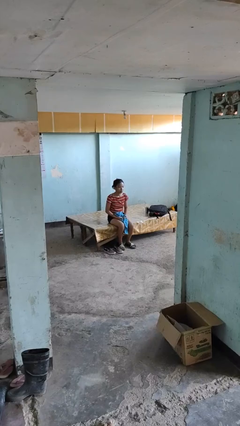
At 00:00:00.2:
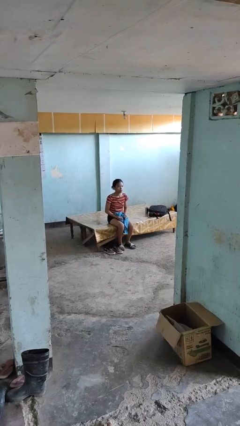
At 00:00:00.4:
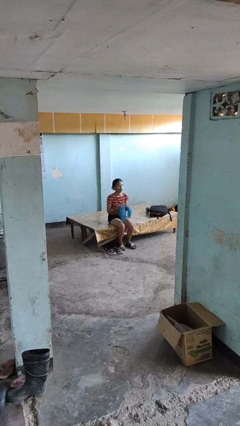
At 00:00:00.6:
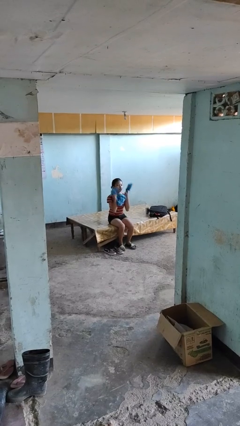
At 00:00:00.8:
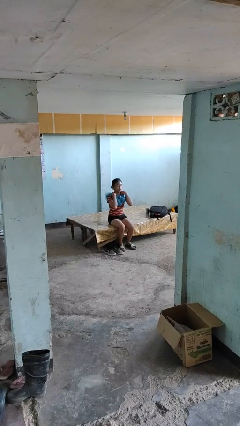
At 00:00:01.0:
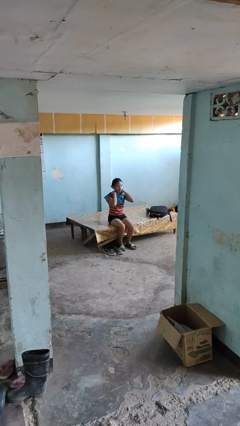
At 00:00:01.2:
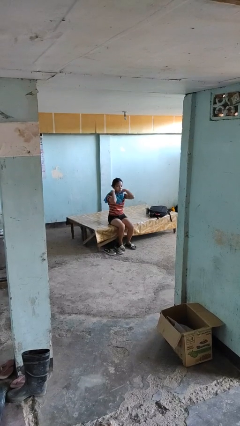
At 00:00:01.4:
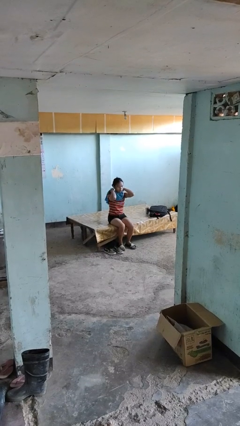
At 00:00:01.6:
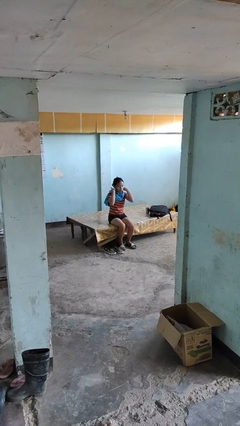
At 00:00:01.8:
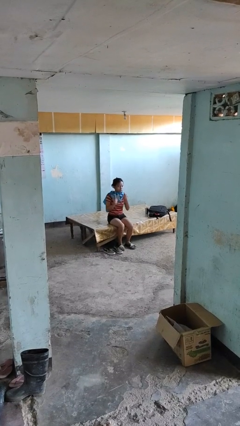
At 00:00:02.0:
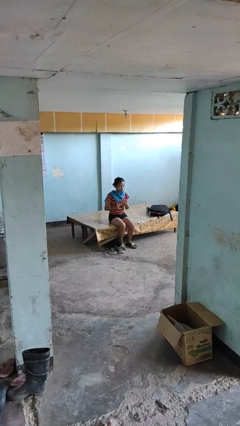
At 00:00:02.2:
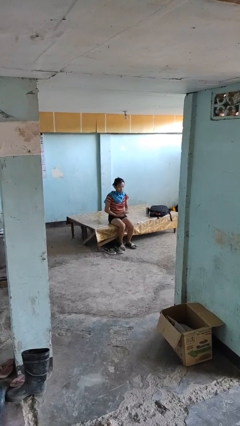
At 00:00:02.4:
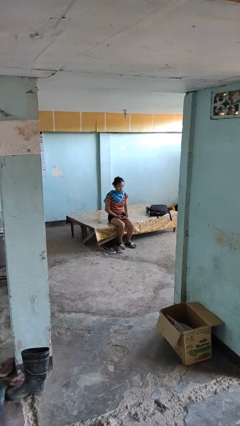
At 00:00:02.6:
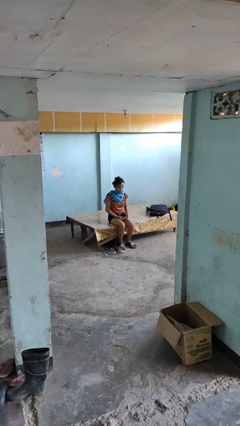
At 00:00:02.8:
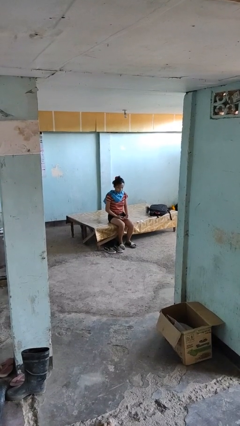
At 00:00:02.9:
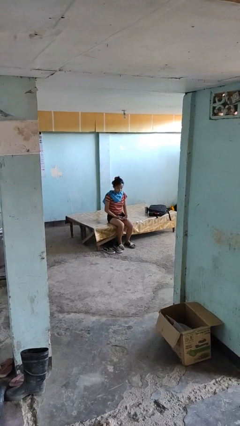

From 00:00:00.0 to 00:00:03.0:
person puts on scarf

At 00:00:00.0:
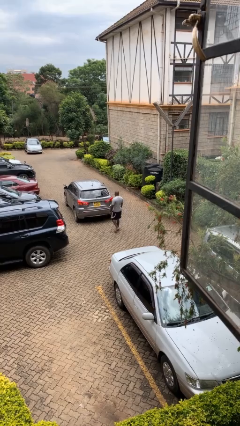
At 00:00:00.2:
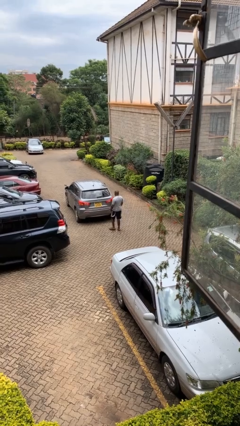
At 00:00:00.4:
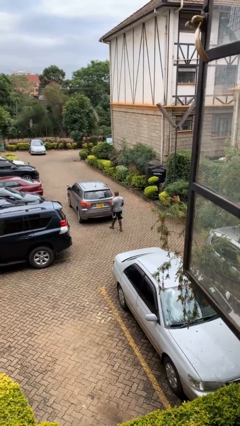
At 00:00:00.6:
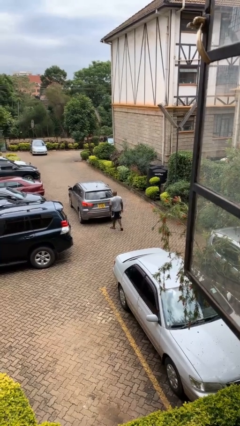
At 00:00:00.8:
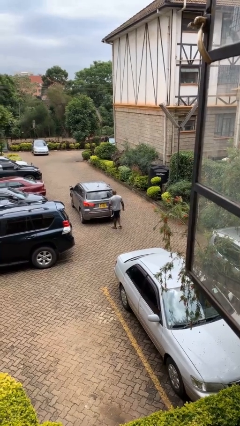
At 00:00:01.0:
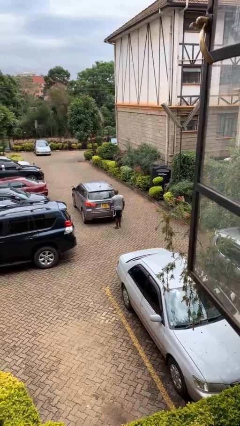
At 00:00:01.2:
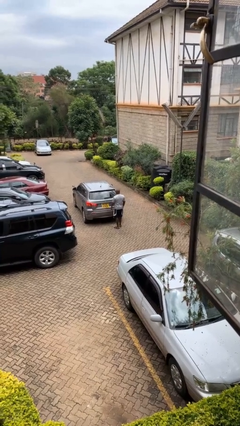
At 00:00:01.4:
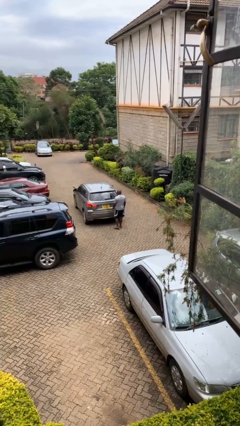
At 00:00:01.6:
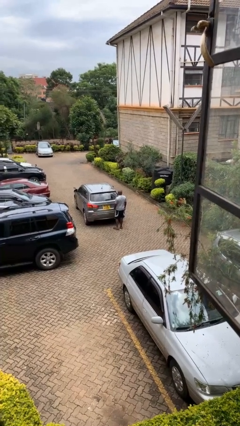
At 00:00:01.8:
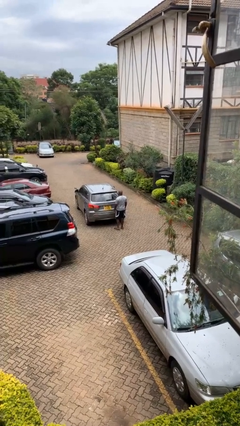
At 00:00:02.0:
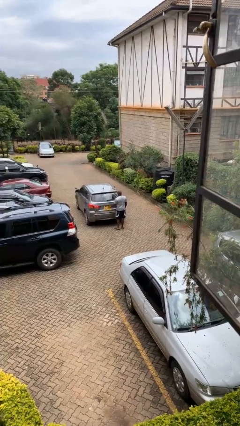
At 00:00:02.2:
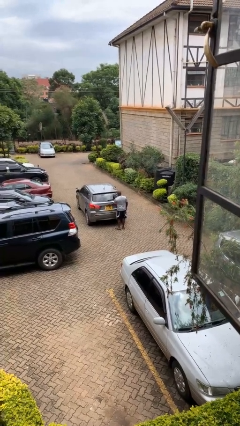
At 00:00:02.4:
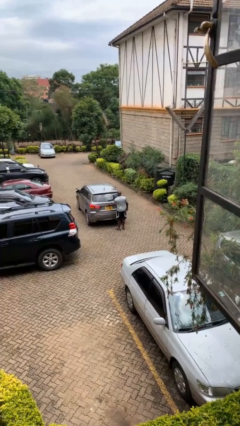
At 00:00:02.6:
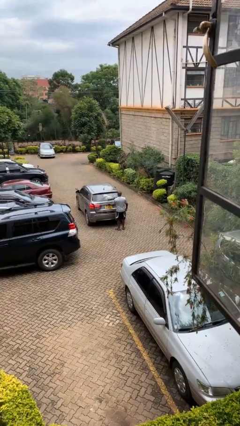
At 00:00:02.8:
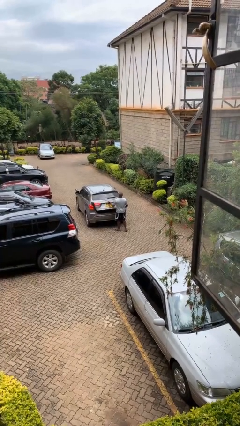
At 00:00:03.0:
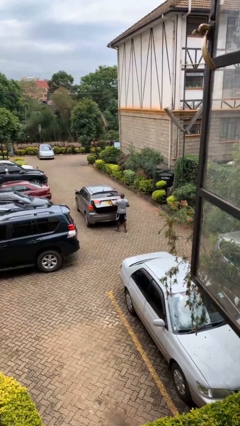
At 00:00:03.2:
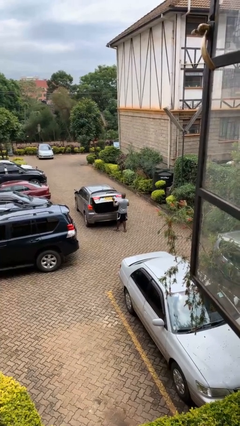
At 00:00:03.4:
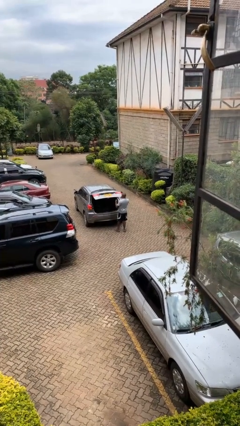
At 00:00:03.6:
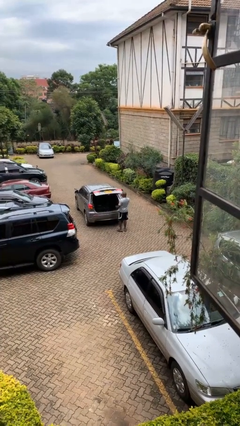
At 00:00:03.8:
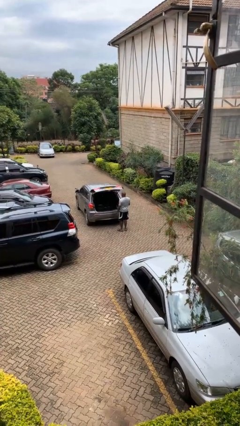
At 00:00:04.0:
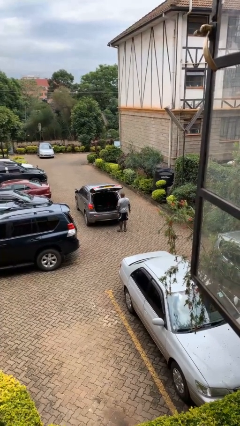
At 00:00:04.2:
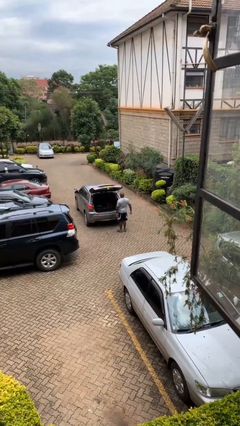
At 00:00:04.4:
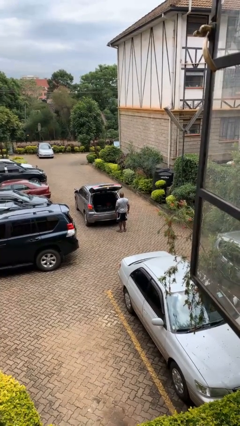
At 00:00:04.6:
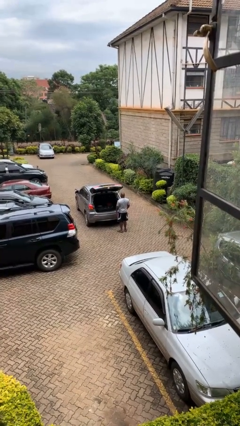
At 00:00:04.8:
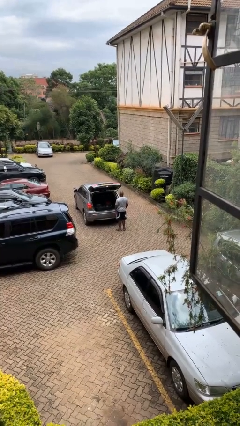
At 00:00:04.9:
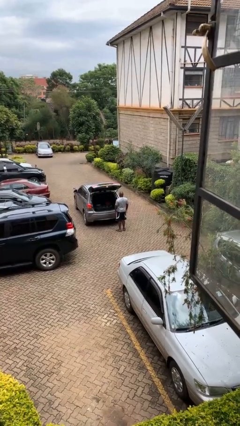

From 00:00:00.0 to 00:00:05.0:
person opens car trunk

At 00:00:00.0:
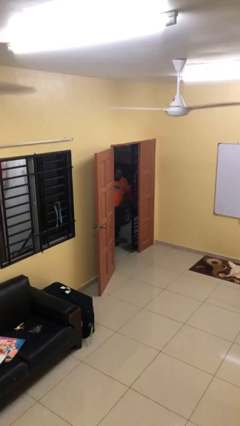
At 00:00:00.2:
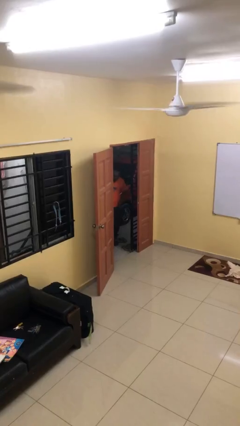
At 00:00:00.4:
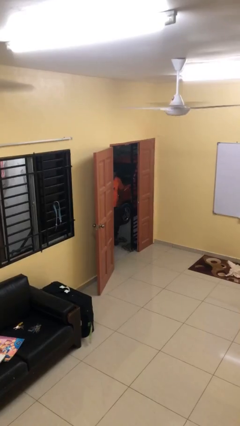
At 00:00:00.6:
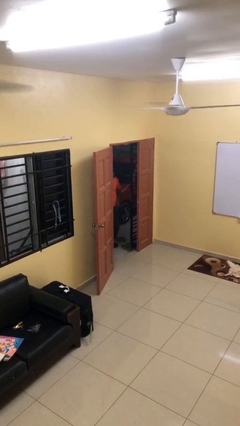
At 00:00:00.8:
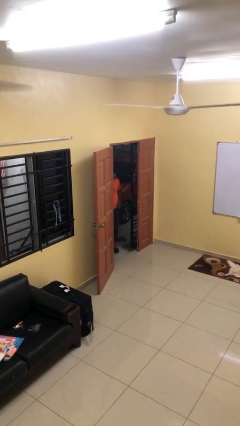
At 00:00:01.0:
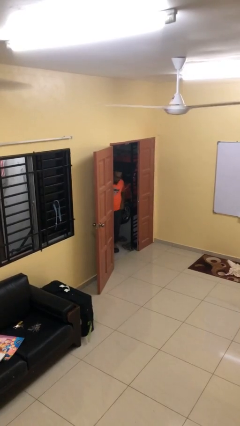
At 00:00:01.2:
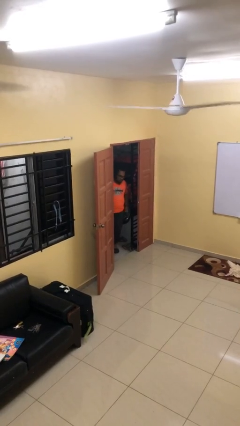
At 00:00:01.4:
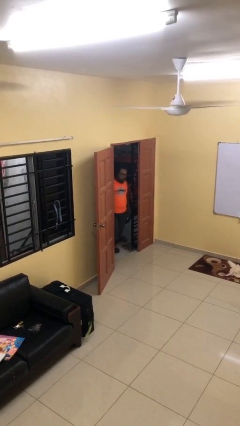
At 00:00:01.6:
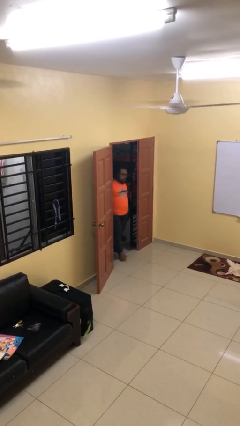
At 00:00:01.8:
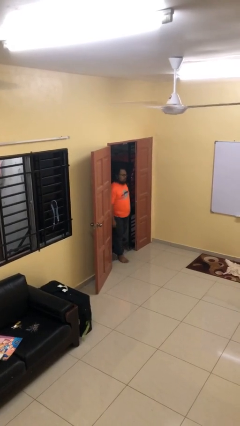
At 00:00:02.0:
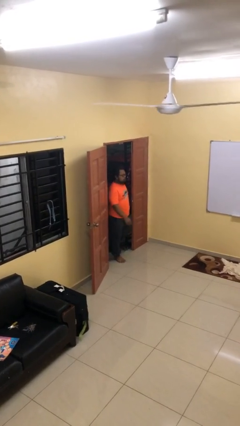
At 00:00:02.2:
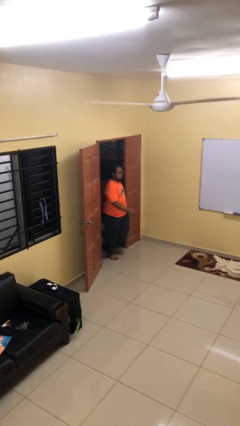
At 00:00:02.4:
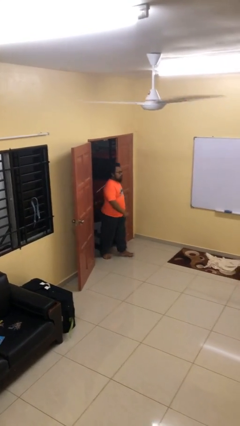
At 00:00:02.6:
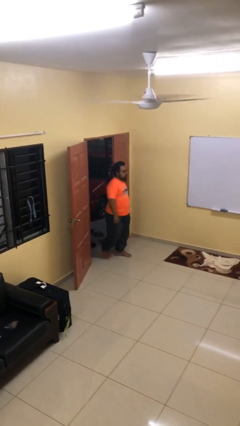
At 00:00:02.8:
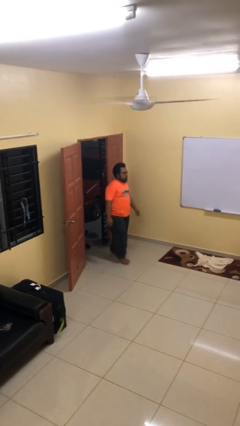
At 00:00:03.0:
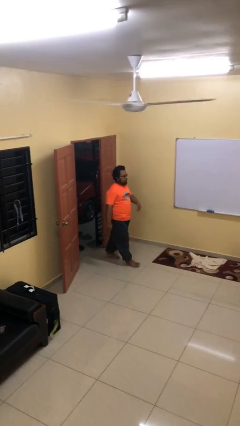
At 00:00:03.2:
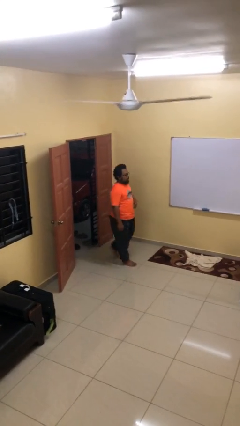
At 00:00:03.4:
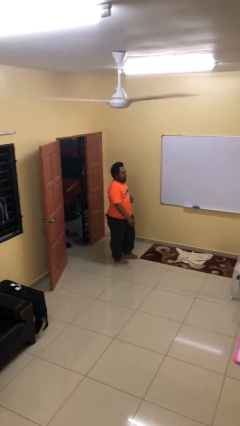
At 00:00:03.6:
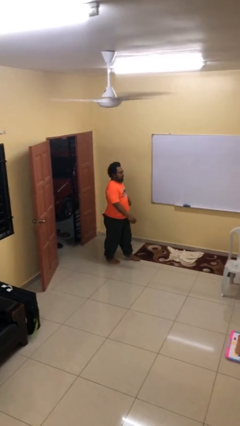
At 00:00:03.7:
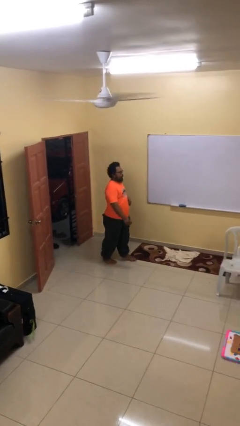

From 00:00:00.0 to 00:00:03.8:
person enters scene through structure

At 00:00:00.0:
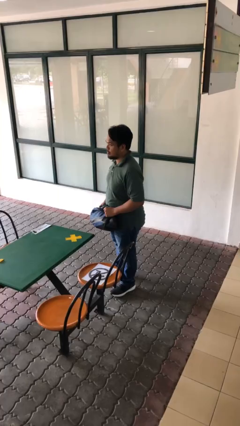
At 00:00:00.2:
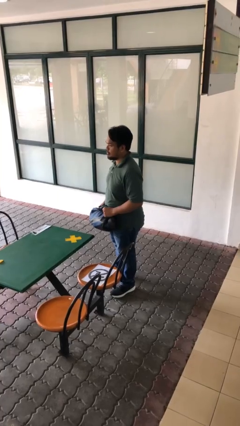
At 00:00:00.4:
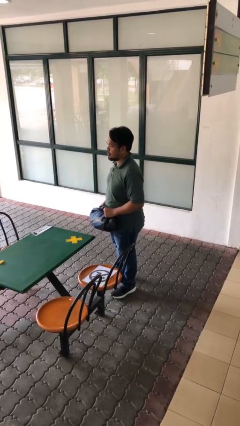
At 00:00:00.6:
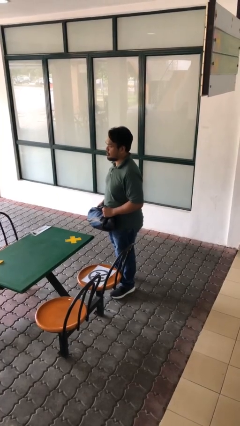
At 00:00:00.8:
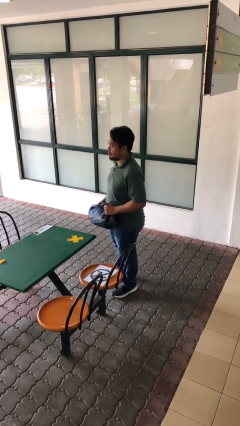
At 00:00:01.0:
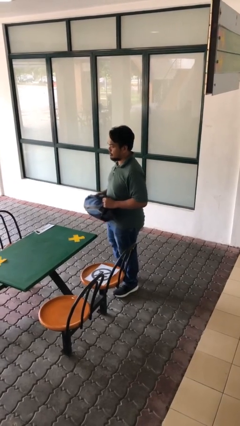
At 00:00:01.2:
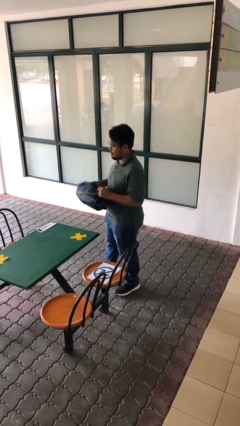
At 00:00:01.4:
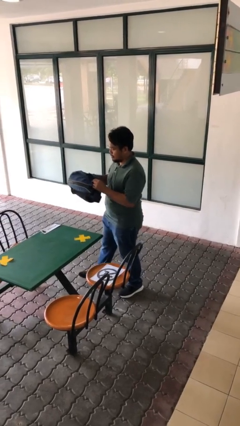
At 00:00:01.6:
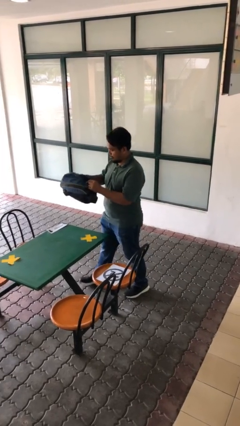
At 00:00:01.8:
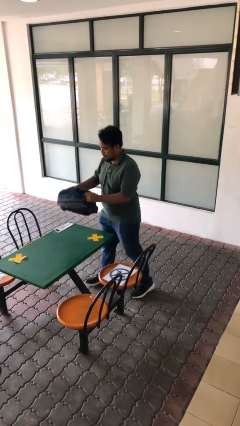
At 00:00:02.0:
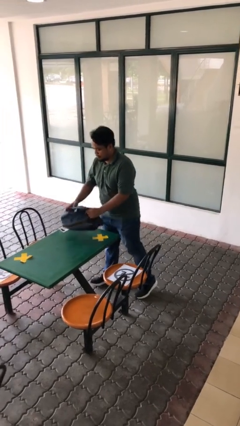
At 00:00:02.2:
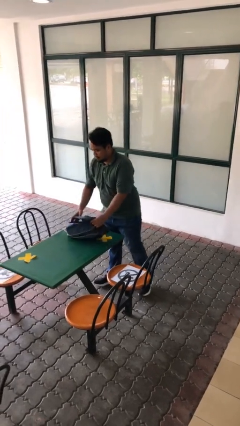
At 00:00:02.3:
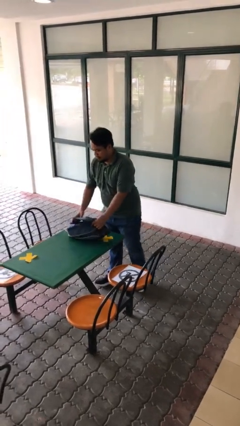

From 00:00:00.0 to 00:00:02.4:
person puts down object on table

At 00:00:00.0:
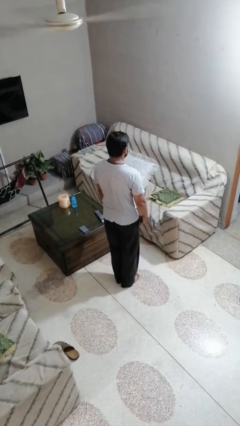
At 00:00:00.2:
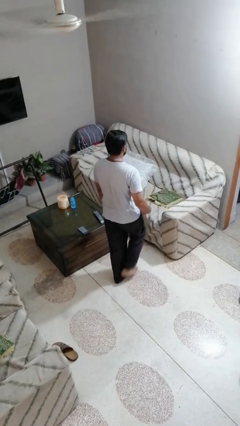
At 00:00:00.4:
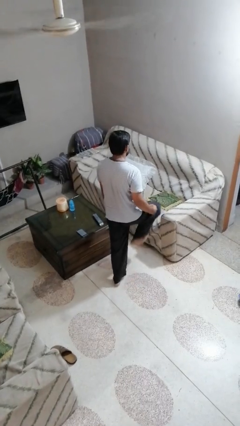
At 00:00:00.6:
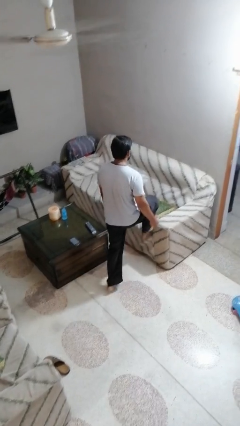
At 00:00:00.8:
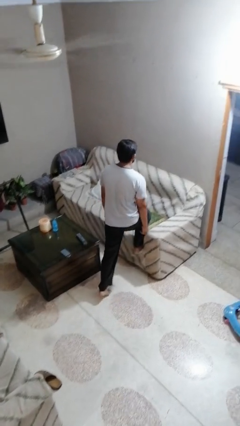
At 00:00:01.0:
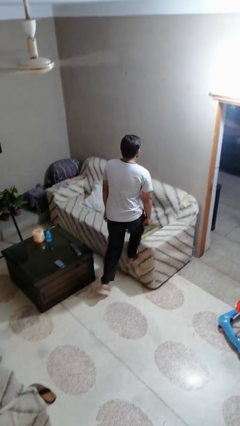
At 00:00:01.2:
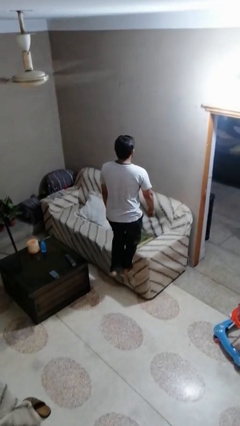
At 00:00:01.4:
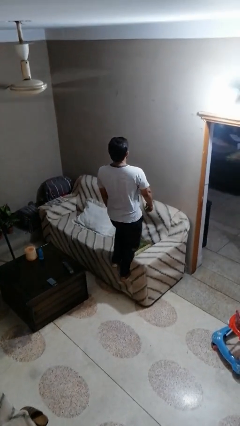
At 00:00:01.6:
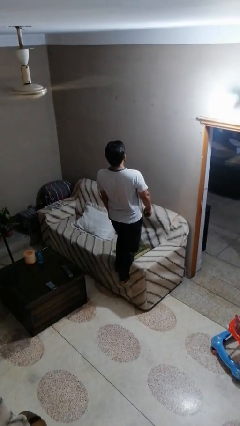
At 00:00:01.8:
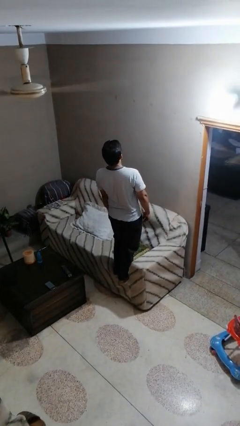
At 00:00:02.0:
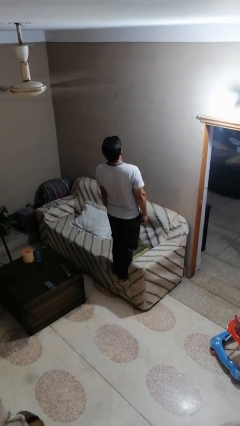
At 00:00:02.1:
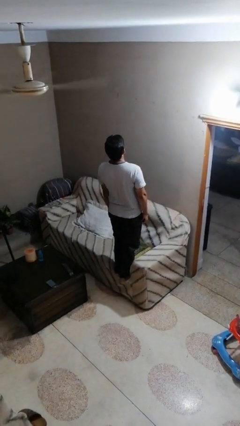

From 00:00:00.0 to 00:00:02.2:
person climbs on couch

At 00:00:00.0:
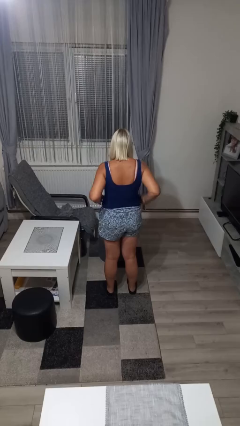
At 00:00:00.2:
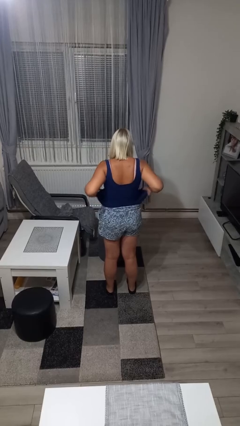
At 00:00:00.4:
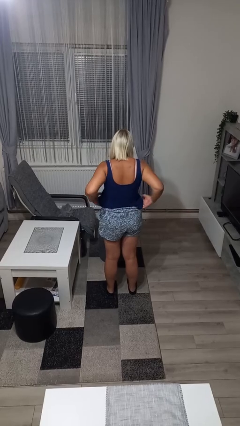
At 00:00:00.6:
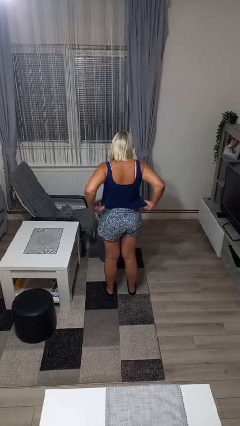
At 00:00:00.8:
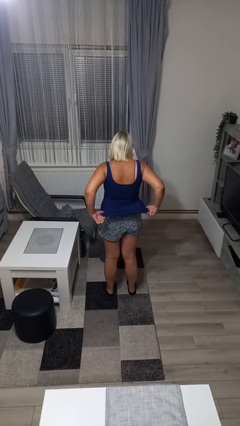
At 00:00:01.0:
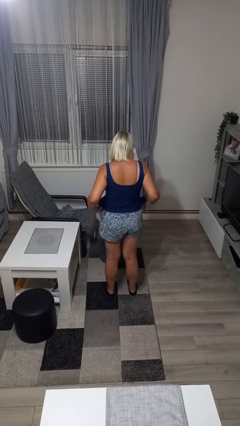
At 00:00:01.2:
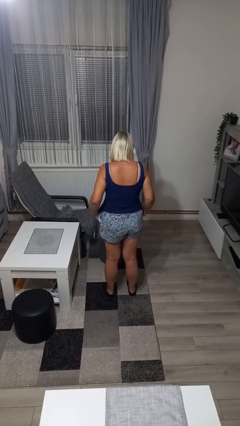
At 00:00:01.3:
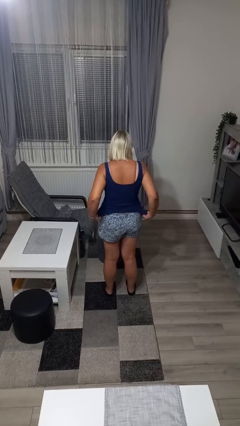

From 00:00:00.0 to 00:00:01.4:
person untucks shirt
